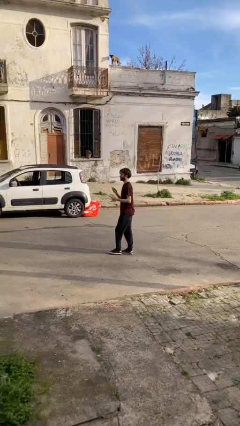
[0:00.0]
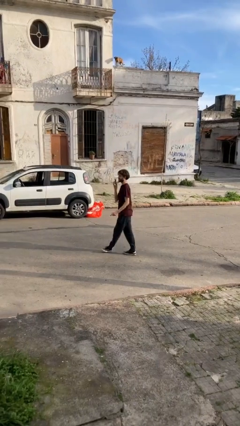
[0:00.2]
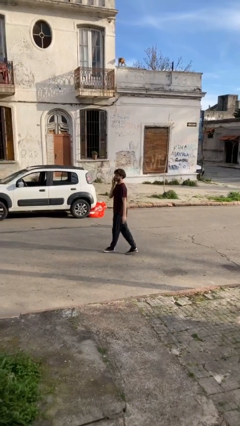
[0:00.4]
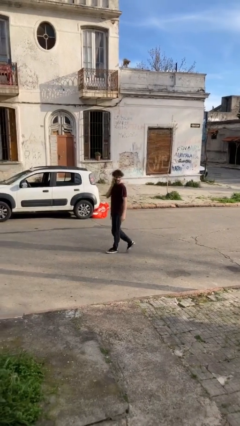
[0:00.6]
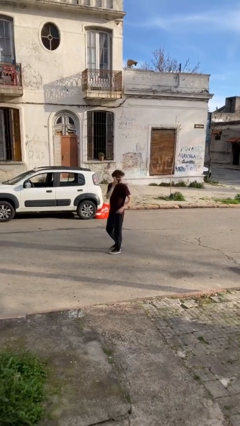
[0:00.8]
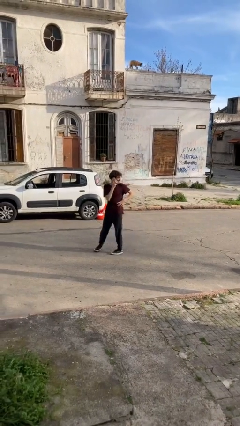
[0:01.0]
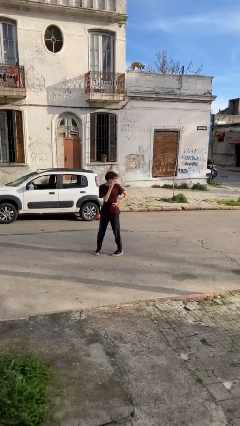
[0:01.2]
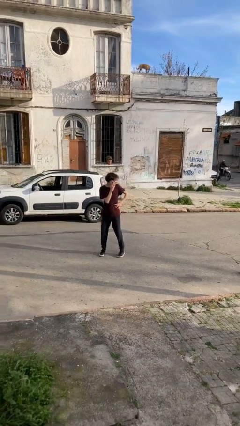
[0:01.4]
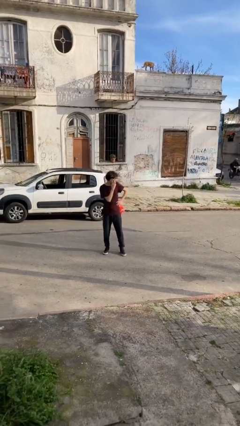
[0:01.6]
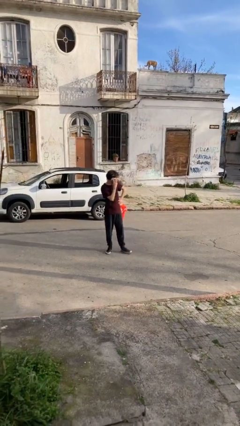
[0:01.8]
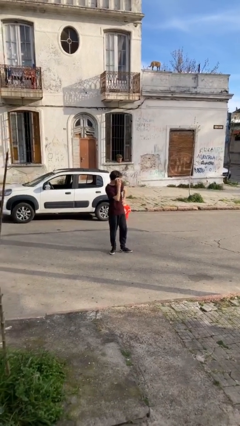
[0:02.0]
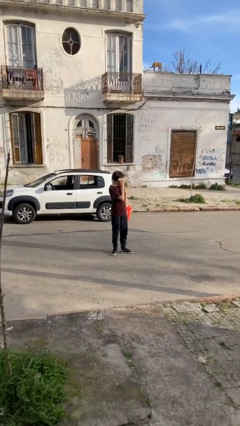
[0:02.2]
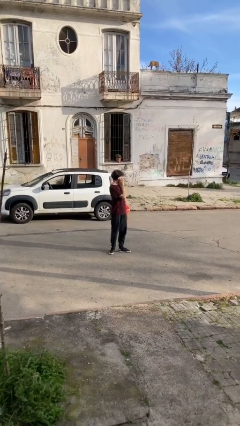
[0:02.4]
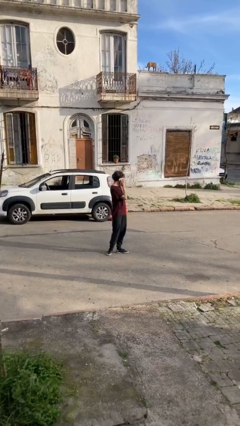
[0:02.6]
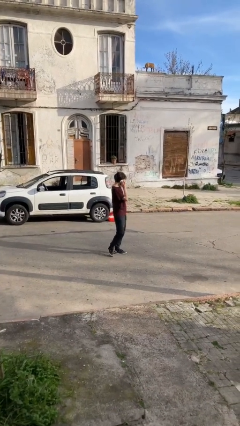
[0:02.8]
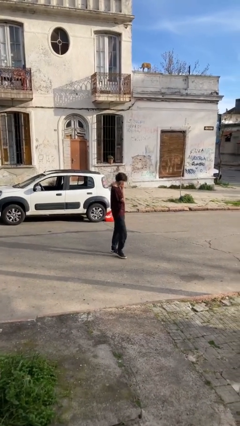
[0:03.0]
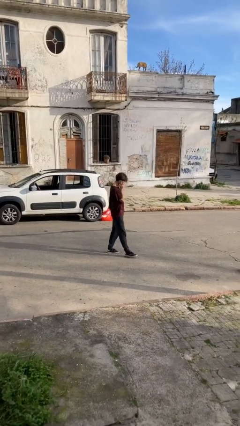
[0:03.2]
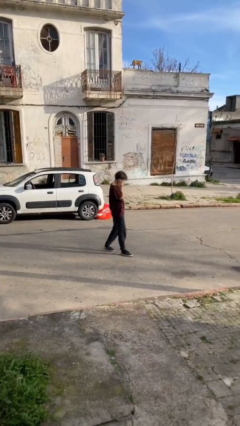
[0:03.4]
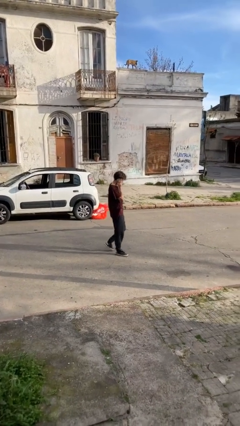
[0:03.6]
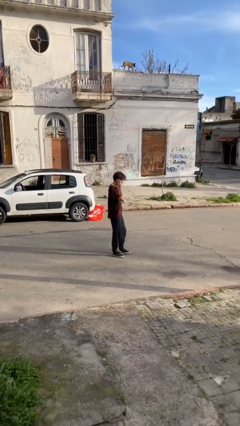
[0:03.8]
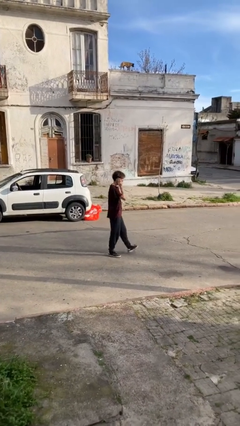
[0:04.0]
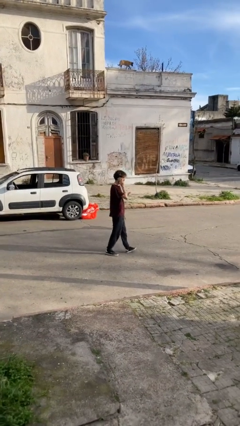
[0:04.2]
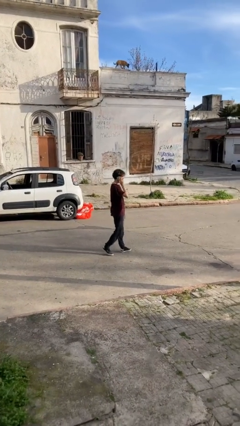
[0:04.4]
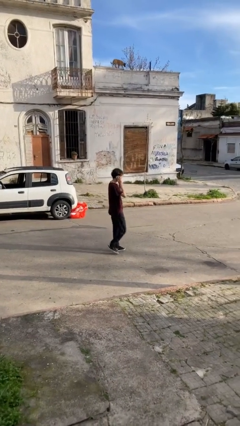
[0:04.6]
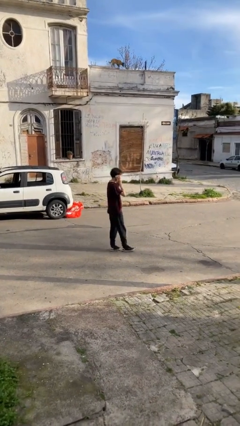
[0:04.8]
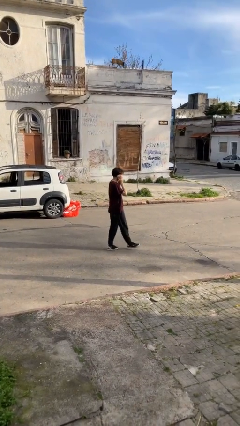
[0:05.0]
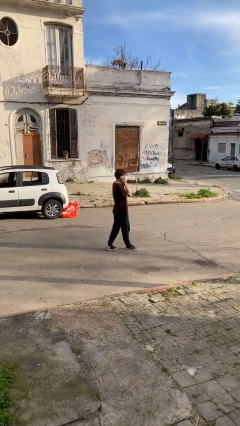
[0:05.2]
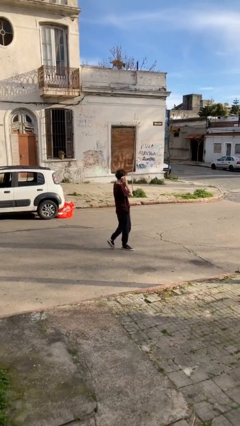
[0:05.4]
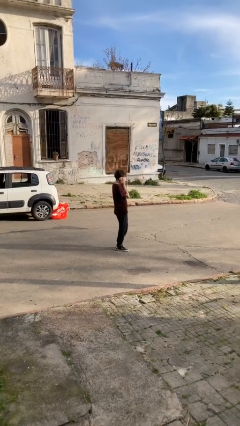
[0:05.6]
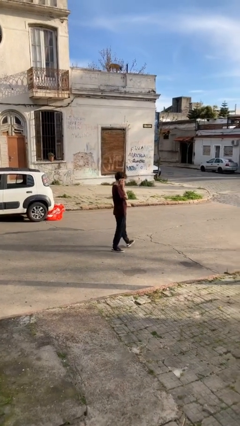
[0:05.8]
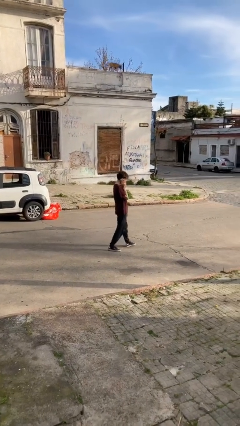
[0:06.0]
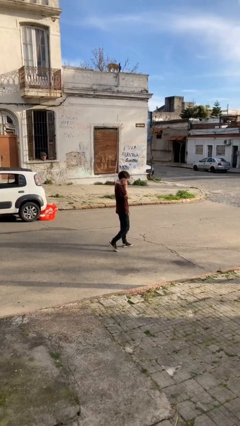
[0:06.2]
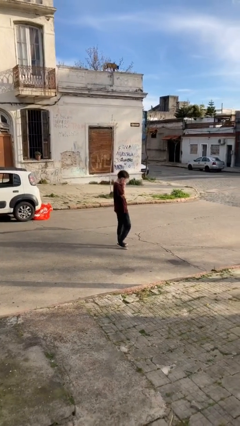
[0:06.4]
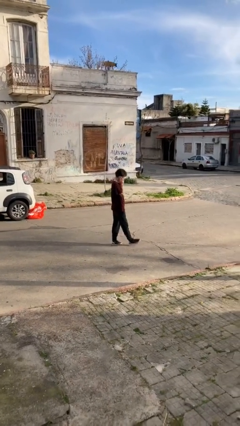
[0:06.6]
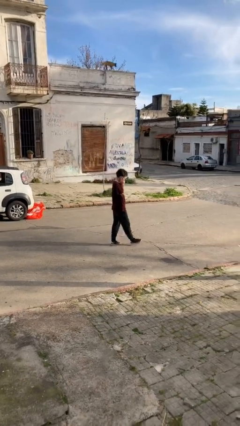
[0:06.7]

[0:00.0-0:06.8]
person talks on phone

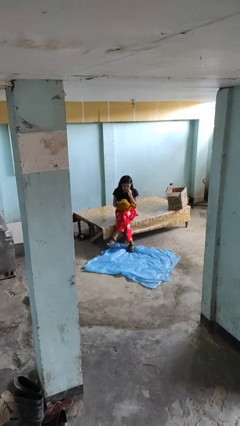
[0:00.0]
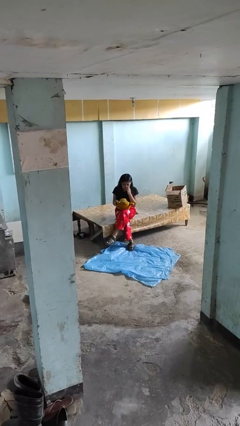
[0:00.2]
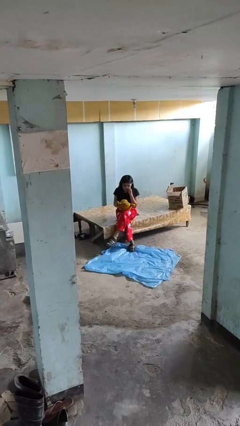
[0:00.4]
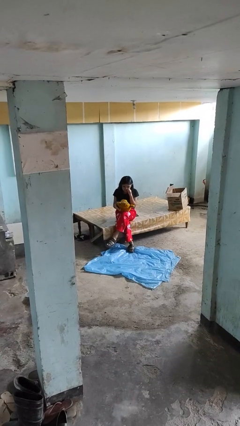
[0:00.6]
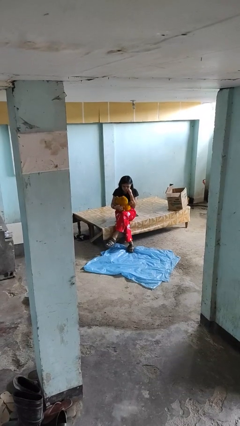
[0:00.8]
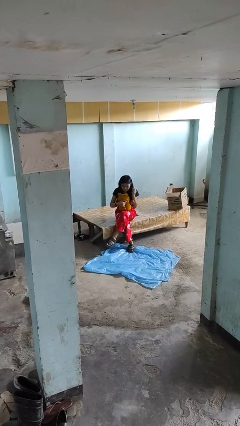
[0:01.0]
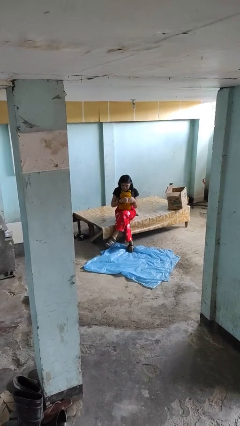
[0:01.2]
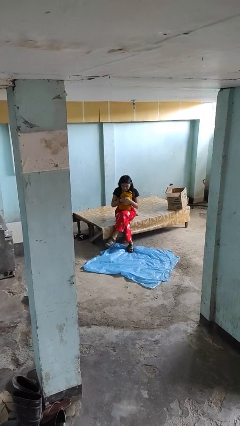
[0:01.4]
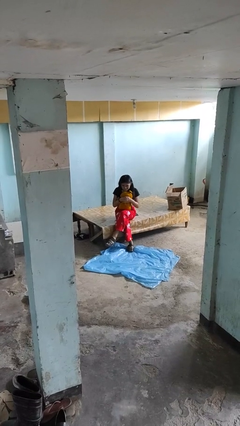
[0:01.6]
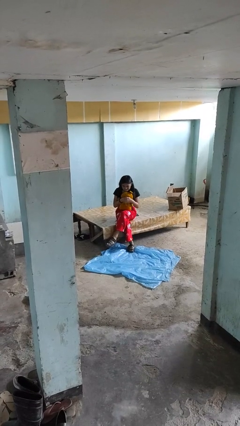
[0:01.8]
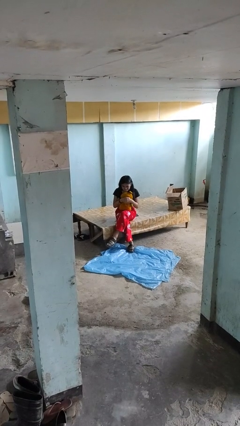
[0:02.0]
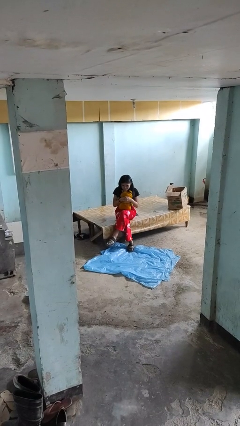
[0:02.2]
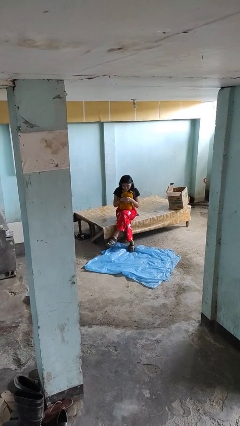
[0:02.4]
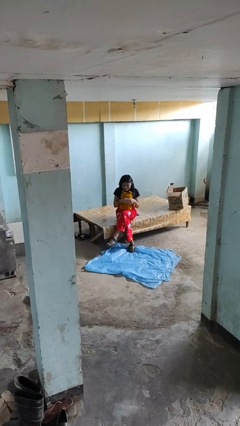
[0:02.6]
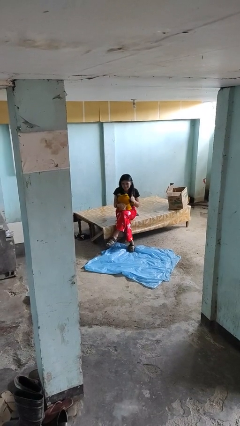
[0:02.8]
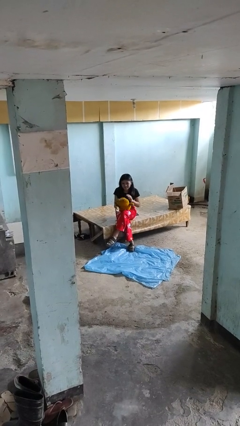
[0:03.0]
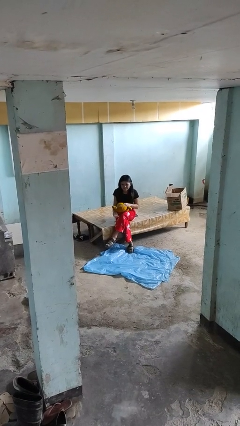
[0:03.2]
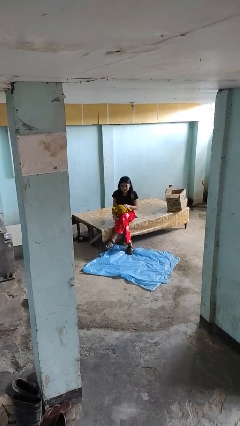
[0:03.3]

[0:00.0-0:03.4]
person hugs stuffed animal

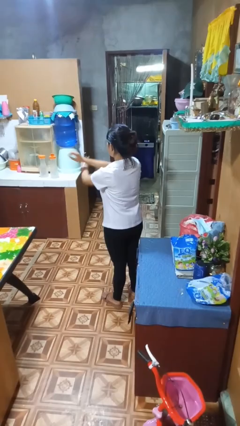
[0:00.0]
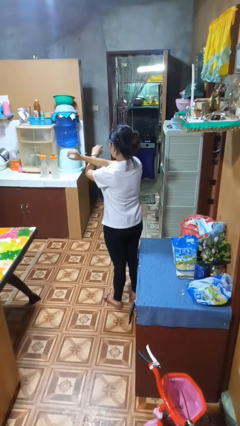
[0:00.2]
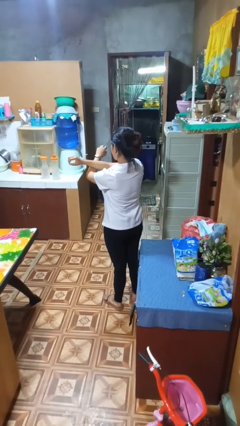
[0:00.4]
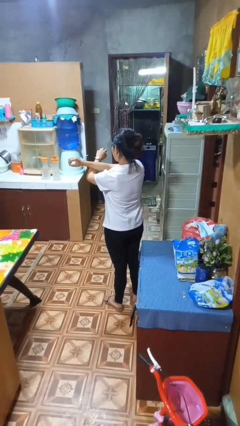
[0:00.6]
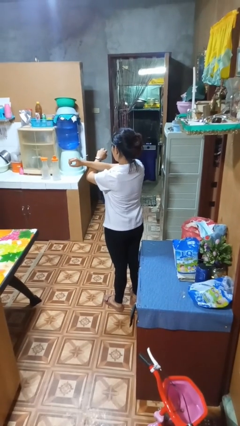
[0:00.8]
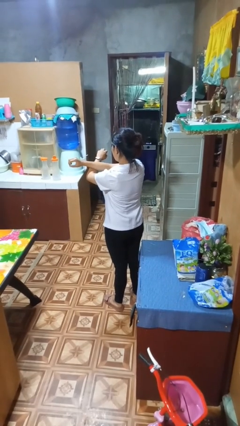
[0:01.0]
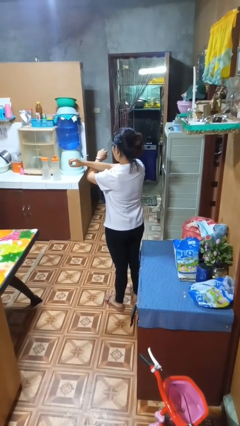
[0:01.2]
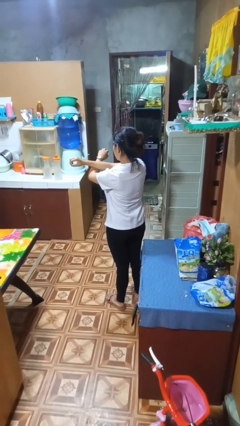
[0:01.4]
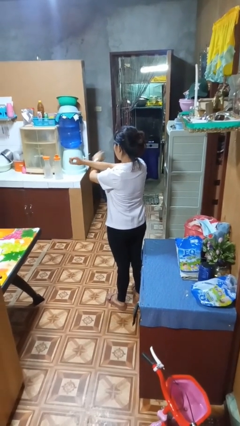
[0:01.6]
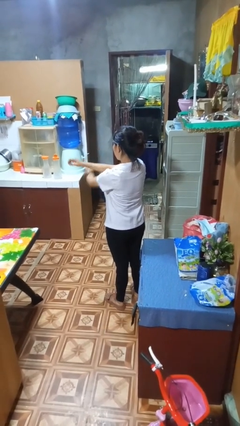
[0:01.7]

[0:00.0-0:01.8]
person crosses arms

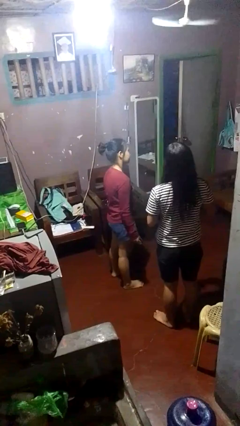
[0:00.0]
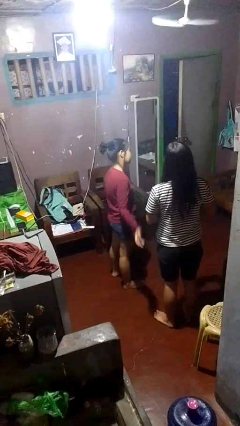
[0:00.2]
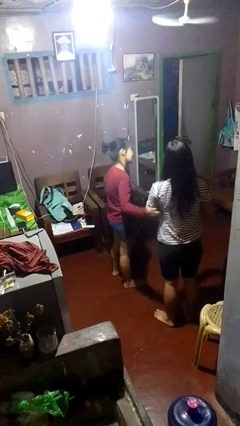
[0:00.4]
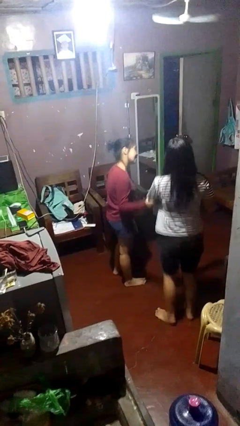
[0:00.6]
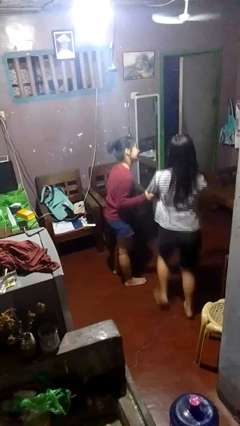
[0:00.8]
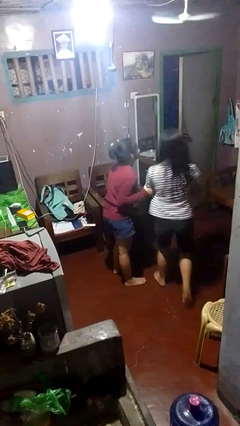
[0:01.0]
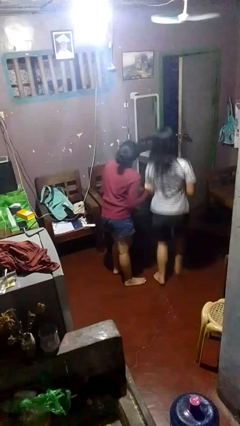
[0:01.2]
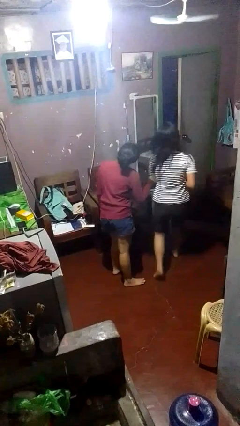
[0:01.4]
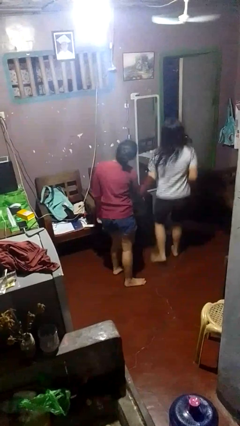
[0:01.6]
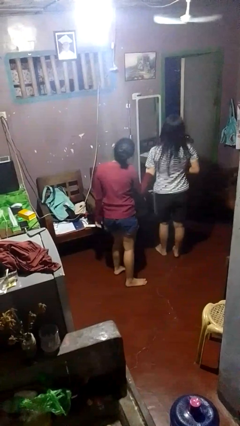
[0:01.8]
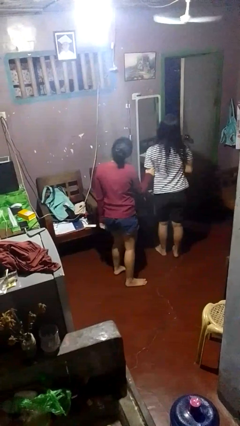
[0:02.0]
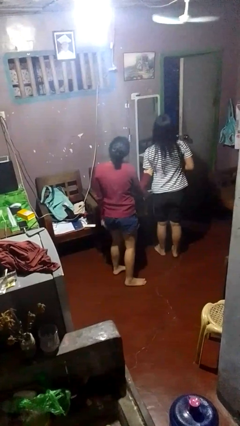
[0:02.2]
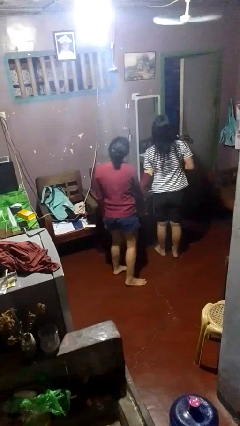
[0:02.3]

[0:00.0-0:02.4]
person grabs person by bicep

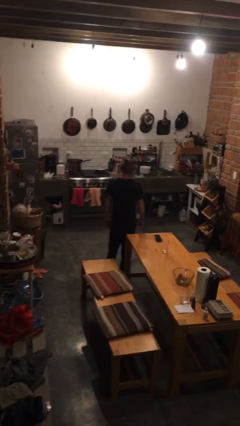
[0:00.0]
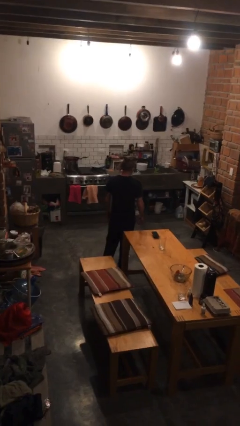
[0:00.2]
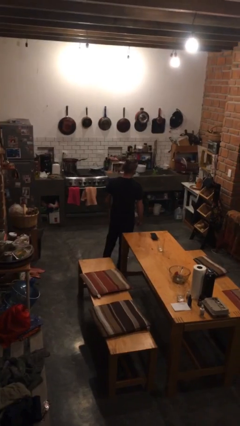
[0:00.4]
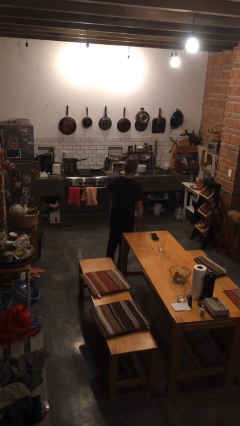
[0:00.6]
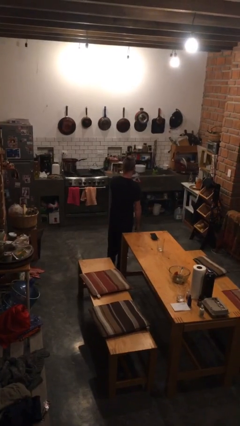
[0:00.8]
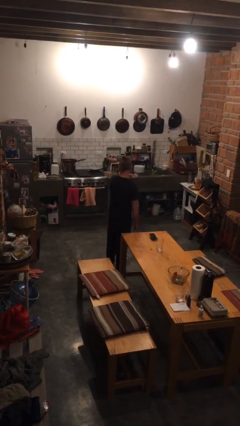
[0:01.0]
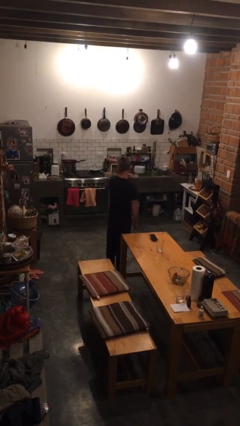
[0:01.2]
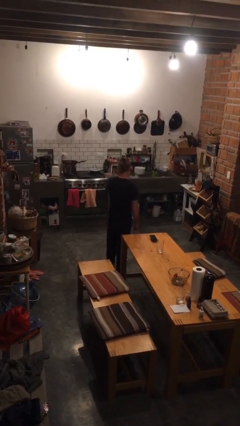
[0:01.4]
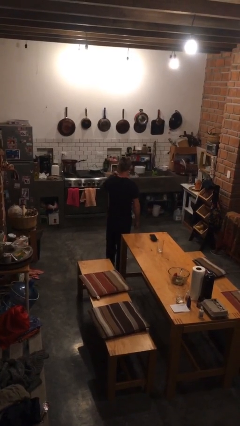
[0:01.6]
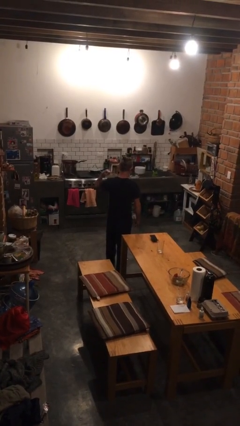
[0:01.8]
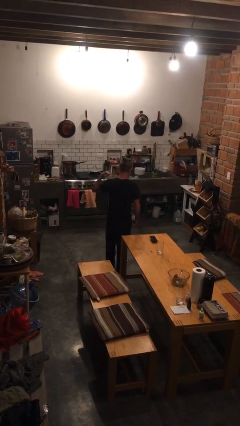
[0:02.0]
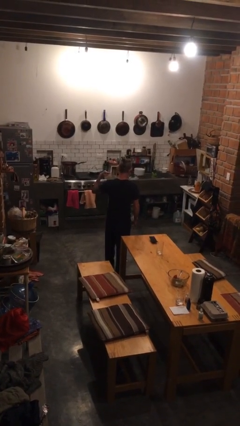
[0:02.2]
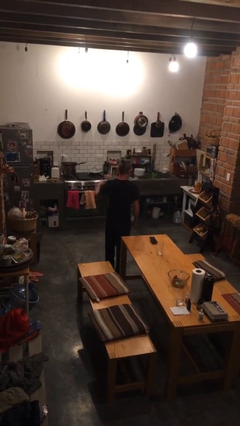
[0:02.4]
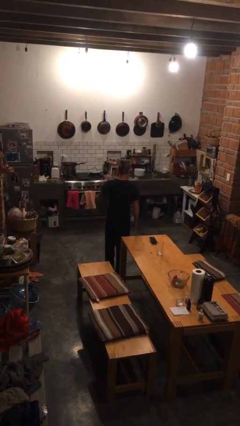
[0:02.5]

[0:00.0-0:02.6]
person gestures cut

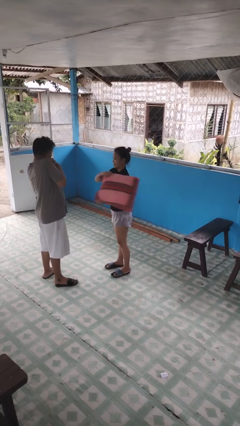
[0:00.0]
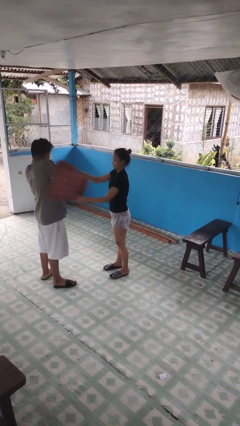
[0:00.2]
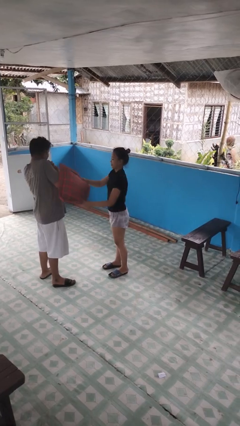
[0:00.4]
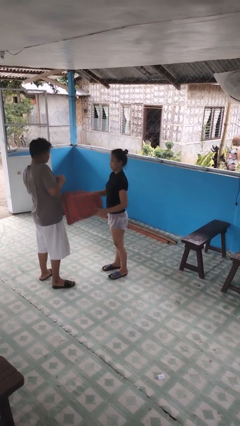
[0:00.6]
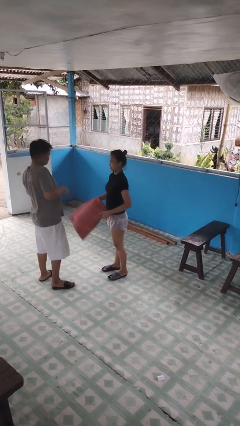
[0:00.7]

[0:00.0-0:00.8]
person hits person with pillow
